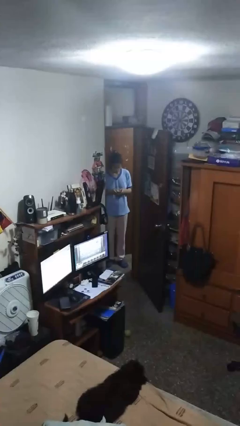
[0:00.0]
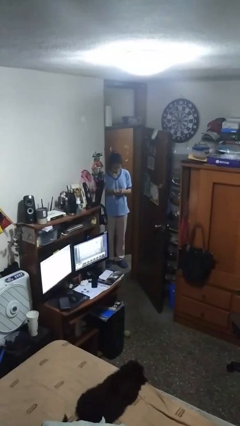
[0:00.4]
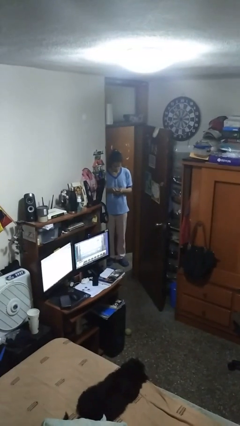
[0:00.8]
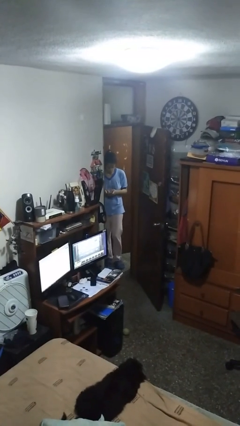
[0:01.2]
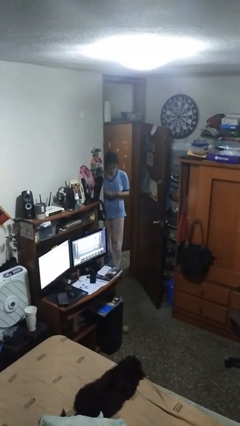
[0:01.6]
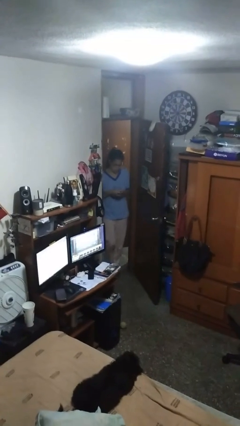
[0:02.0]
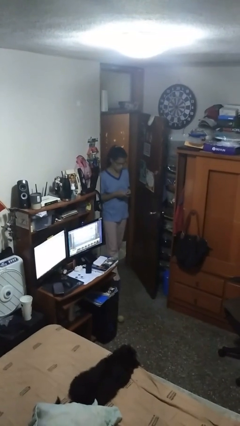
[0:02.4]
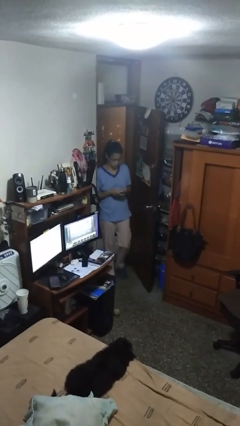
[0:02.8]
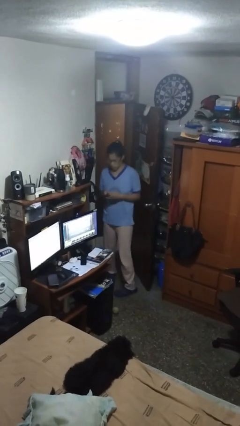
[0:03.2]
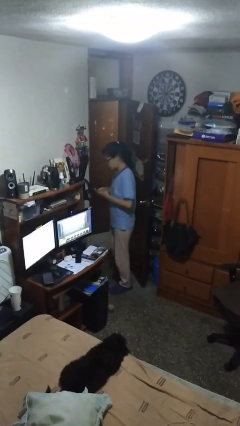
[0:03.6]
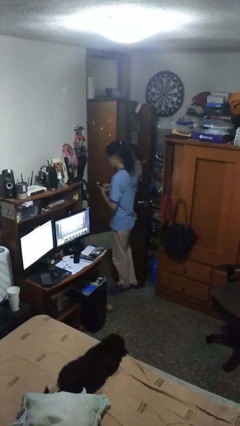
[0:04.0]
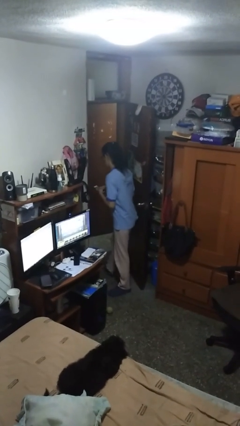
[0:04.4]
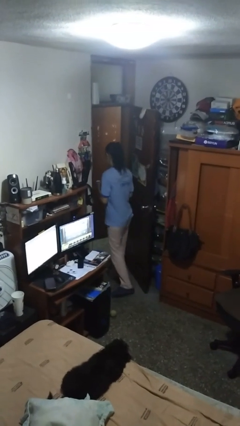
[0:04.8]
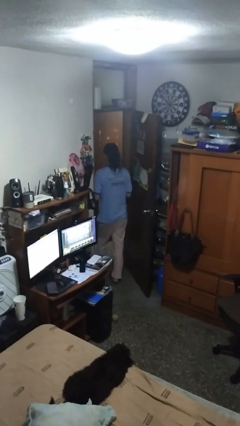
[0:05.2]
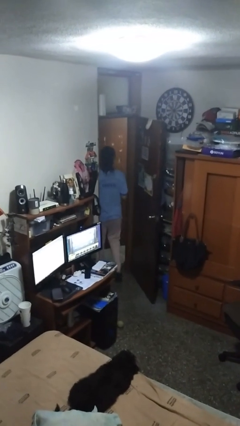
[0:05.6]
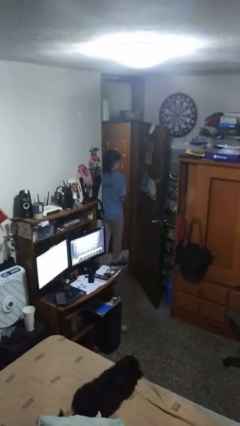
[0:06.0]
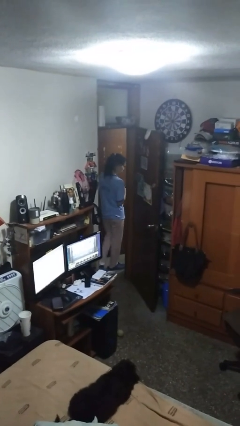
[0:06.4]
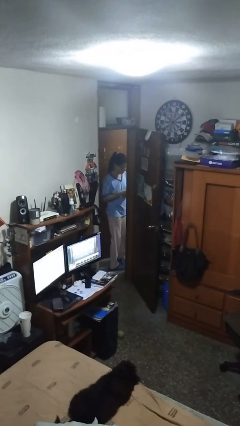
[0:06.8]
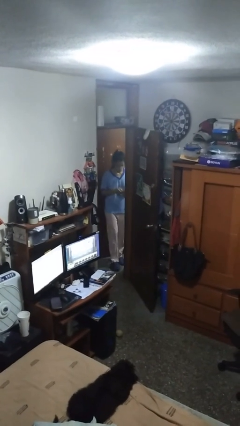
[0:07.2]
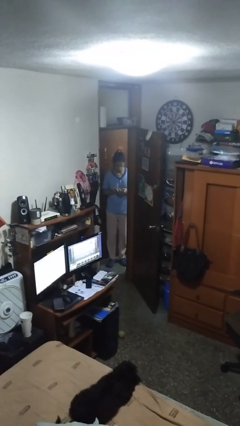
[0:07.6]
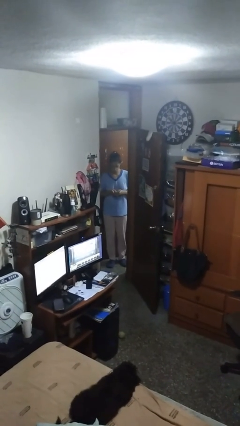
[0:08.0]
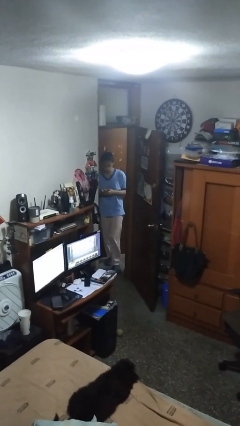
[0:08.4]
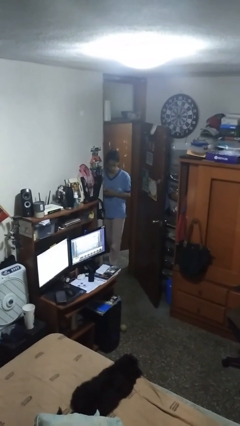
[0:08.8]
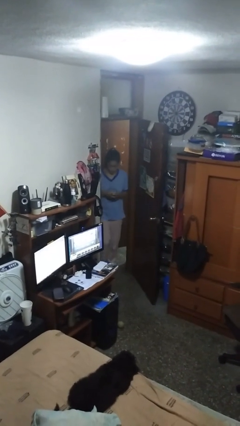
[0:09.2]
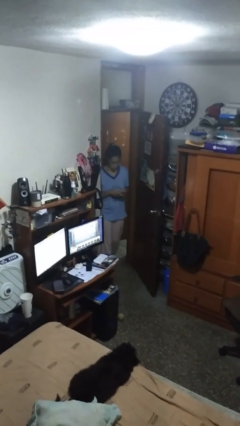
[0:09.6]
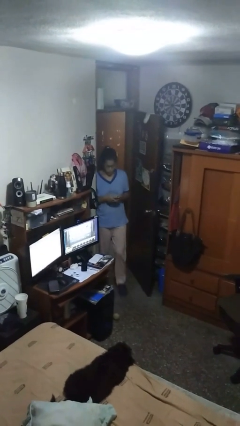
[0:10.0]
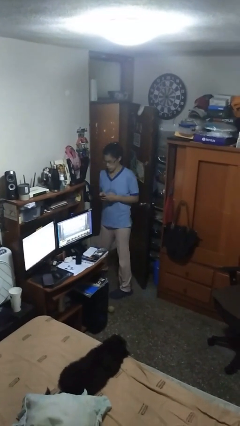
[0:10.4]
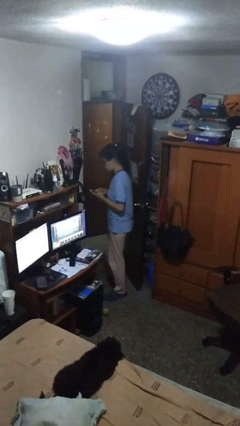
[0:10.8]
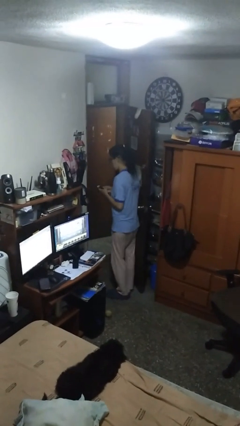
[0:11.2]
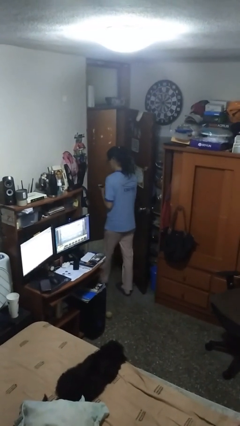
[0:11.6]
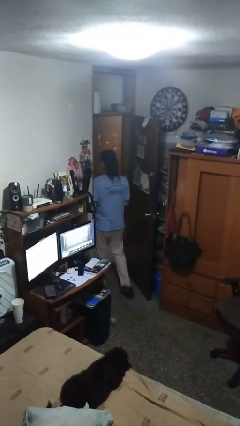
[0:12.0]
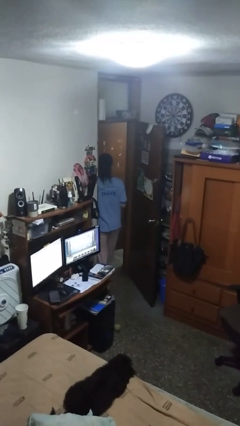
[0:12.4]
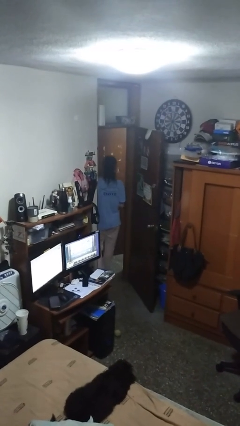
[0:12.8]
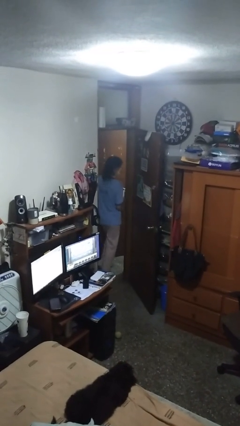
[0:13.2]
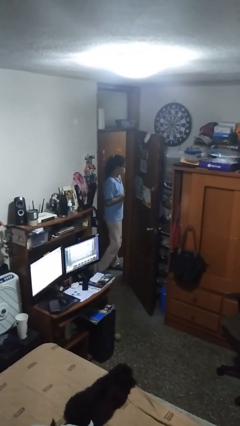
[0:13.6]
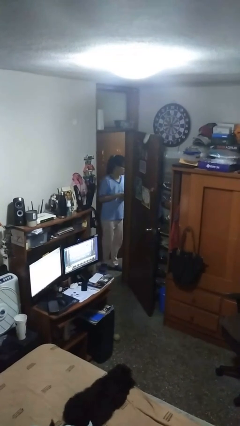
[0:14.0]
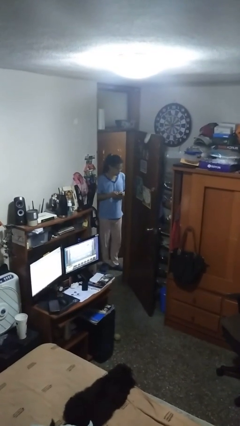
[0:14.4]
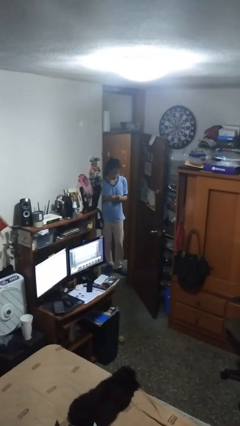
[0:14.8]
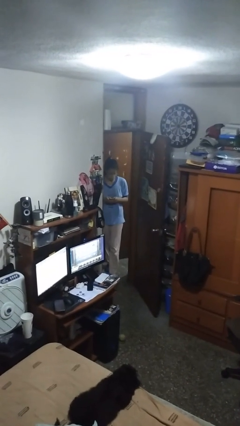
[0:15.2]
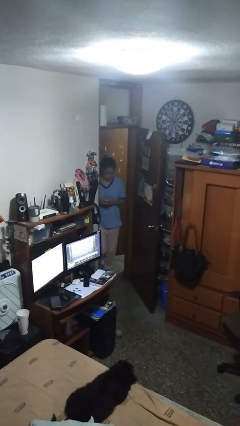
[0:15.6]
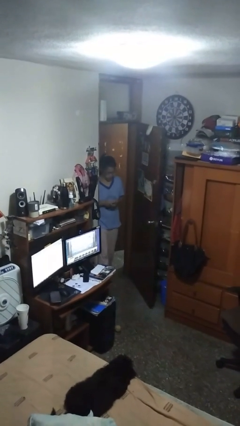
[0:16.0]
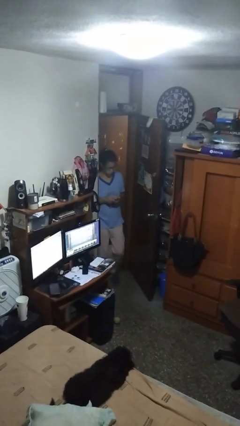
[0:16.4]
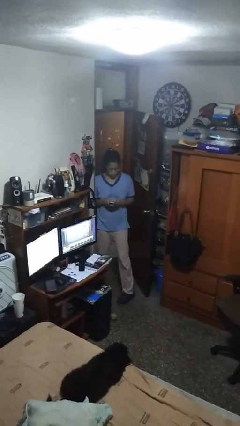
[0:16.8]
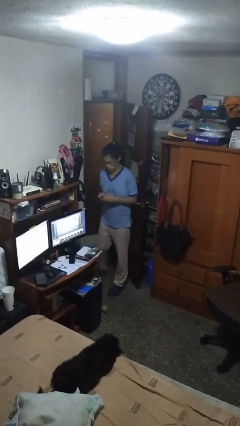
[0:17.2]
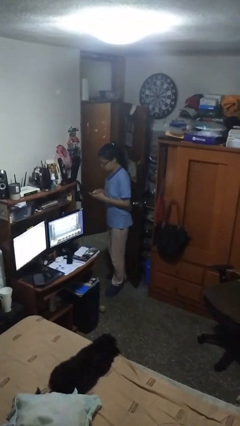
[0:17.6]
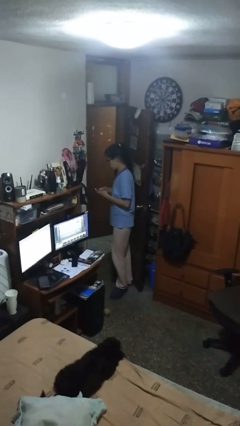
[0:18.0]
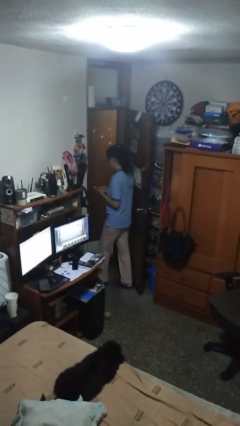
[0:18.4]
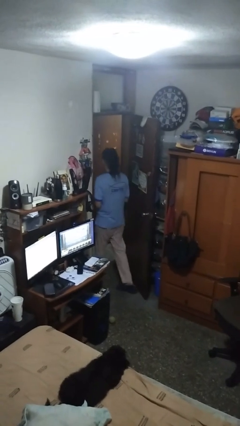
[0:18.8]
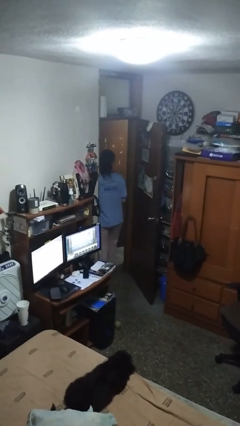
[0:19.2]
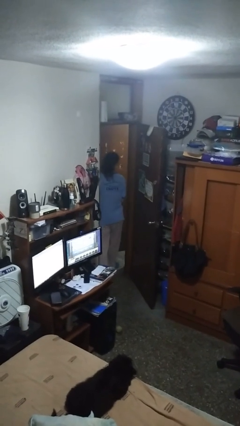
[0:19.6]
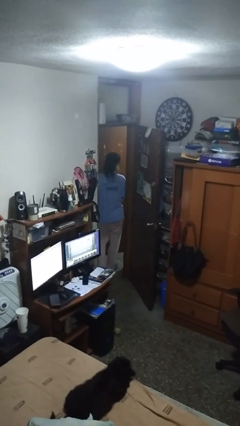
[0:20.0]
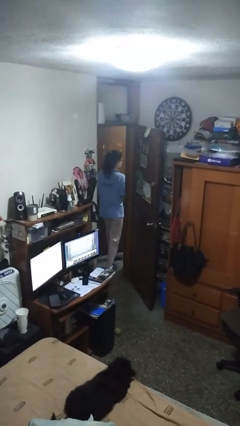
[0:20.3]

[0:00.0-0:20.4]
person texts on phone

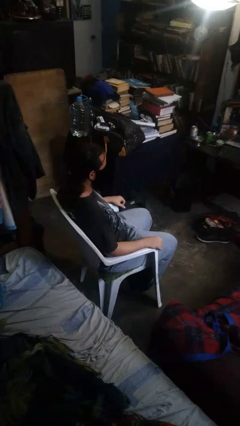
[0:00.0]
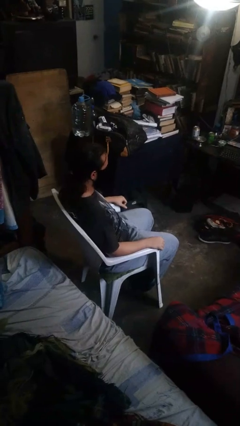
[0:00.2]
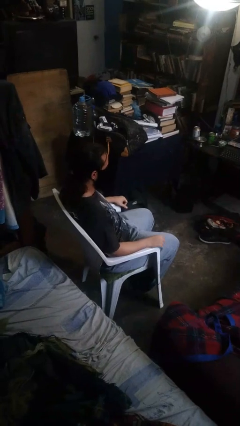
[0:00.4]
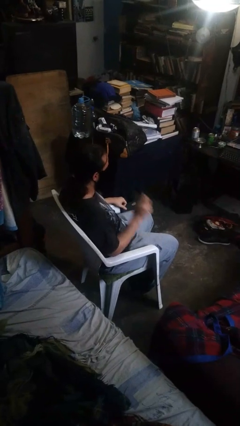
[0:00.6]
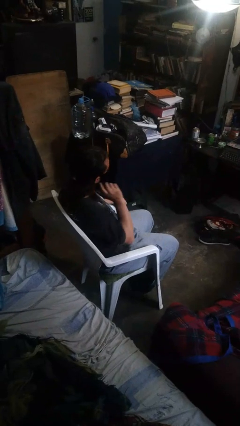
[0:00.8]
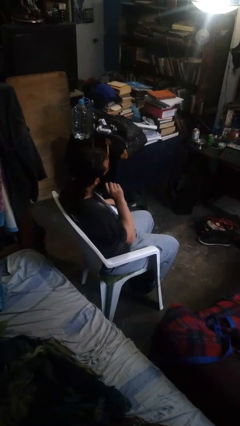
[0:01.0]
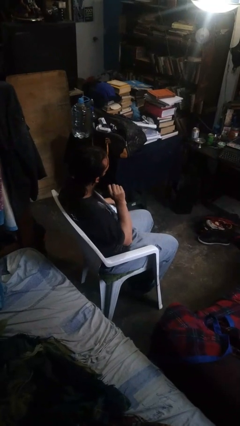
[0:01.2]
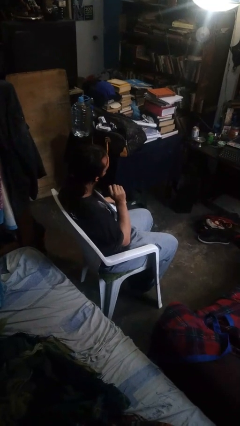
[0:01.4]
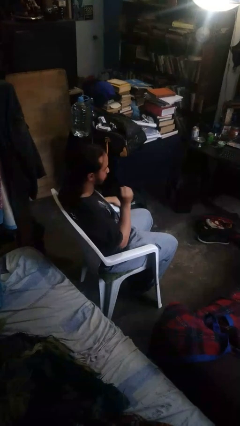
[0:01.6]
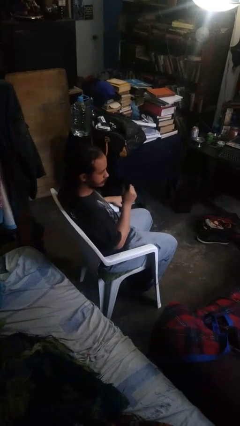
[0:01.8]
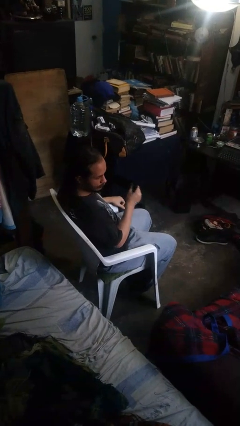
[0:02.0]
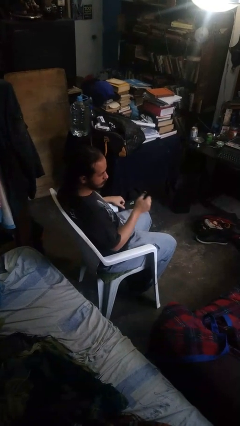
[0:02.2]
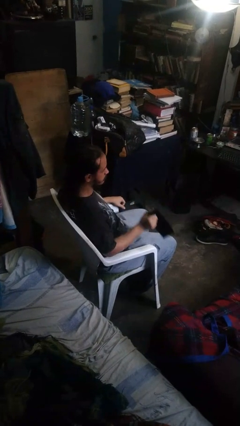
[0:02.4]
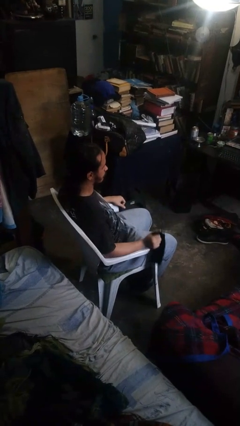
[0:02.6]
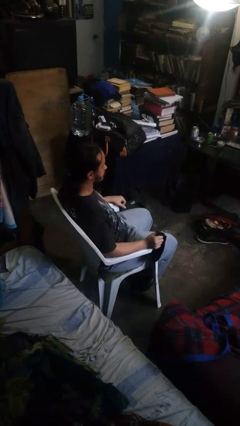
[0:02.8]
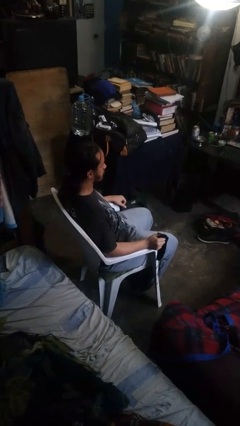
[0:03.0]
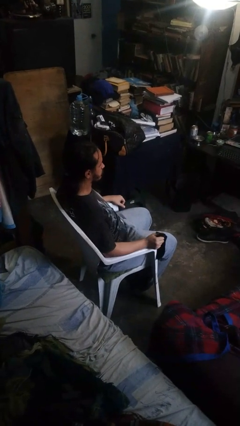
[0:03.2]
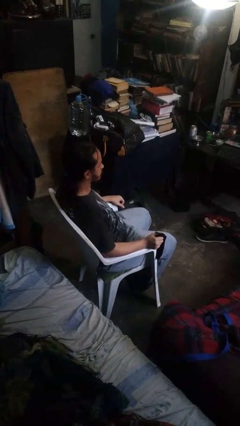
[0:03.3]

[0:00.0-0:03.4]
person takes off facemask

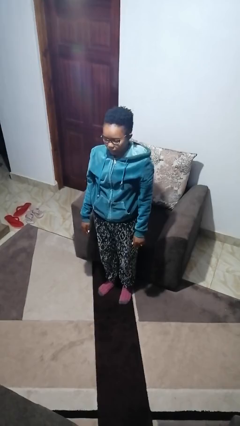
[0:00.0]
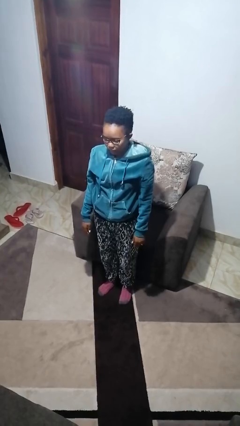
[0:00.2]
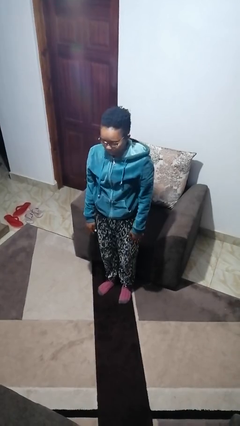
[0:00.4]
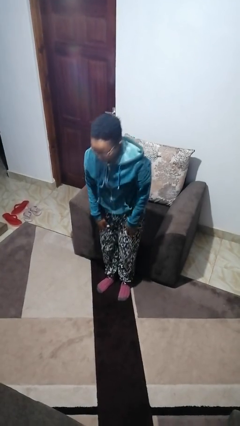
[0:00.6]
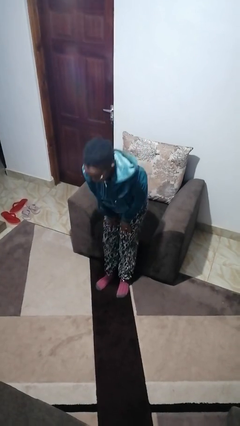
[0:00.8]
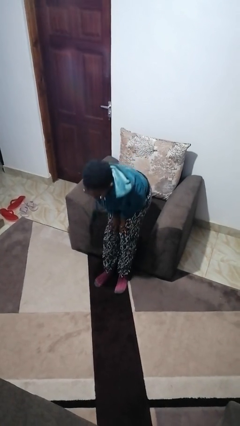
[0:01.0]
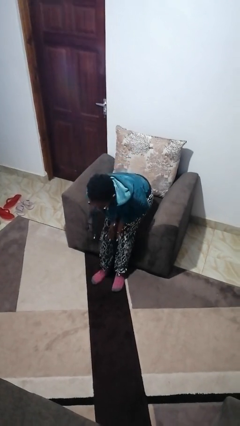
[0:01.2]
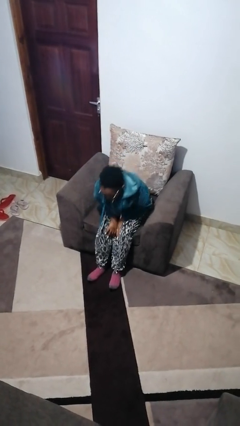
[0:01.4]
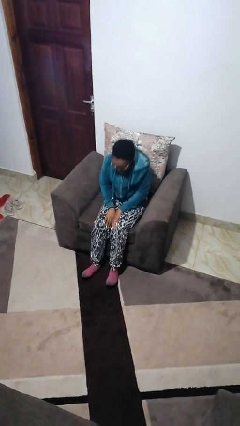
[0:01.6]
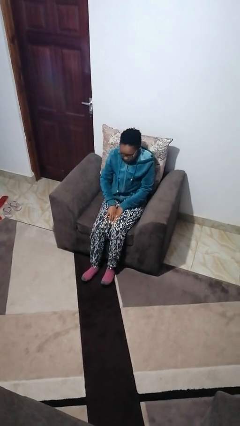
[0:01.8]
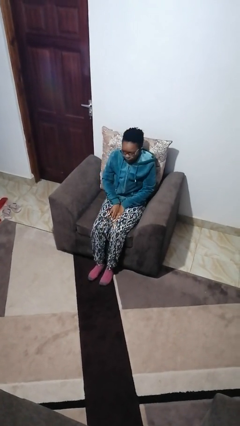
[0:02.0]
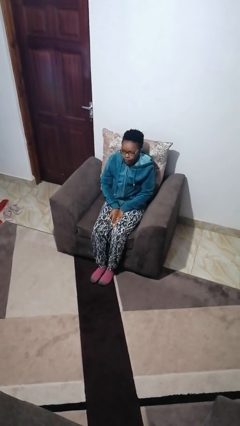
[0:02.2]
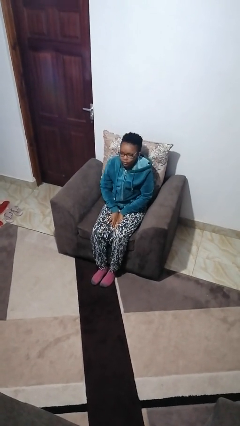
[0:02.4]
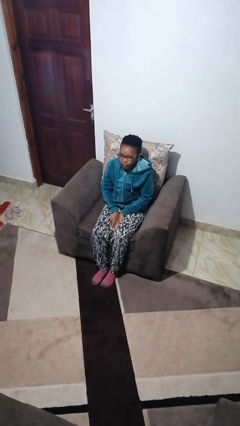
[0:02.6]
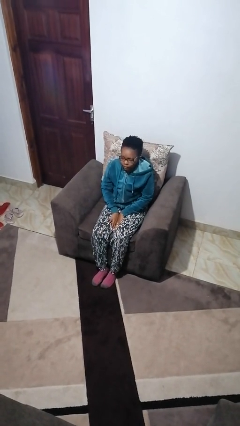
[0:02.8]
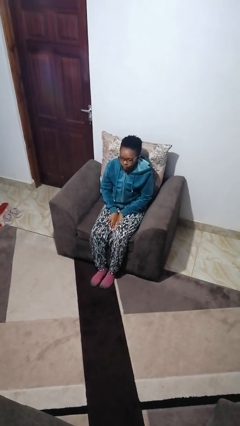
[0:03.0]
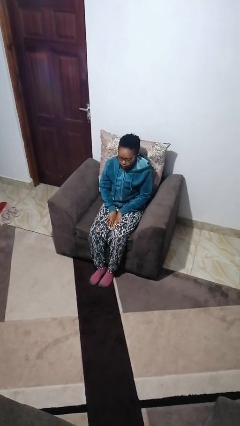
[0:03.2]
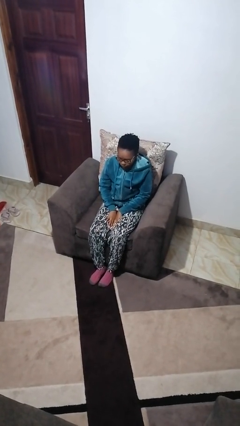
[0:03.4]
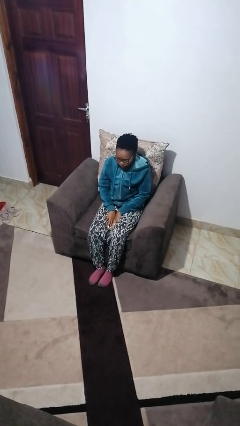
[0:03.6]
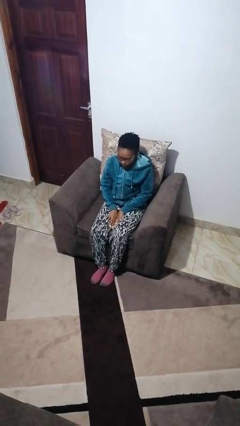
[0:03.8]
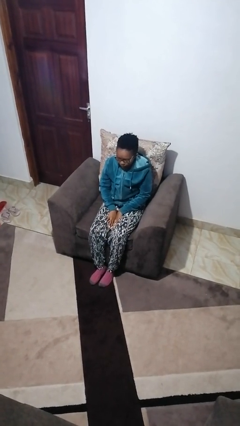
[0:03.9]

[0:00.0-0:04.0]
person sits down

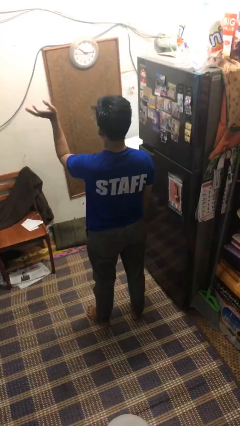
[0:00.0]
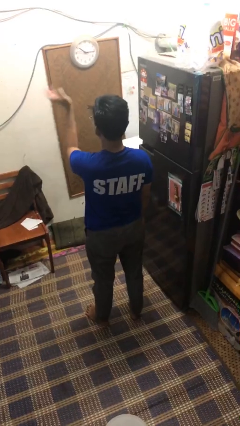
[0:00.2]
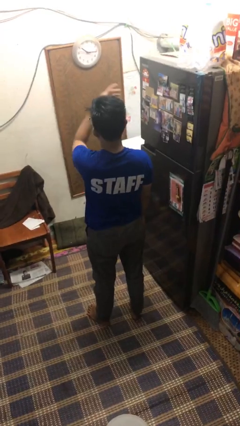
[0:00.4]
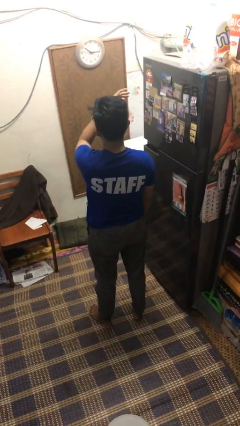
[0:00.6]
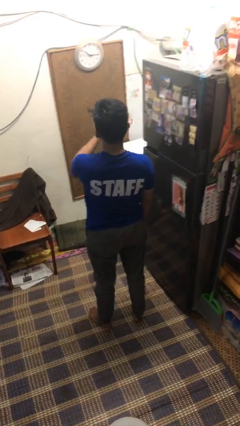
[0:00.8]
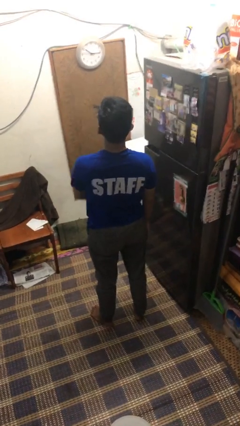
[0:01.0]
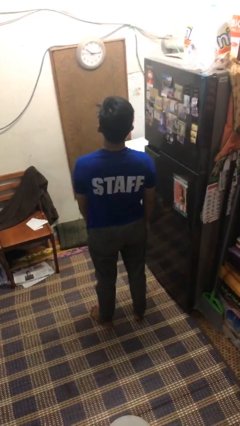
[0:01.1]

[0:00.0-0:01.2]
person gestures swipe right
